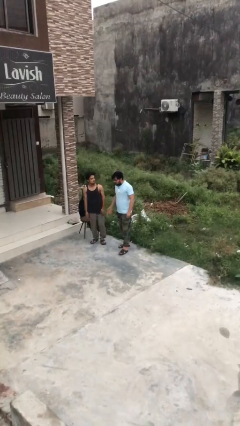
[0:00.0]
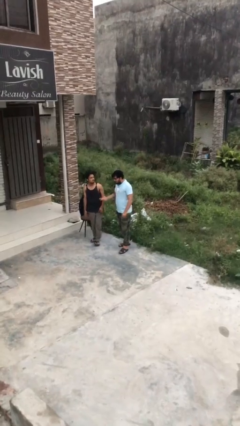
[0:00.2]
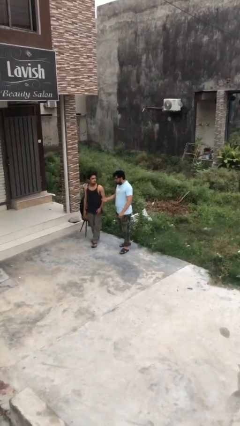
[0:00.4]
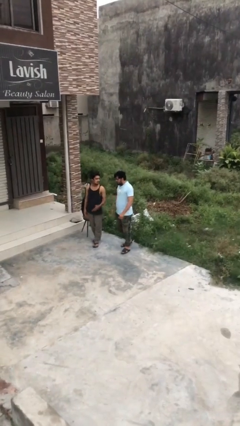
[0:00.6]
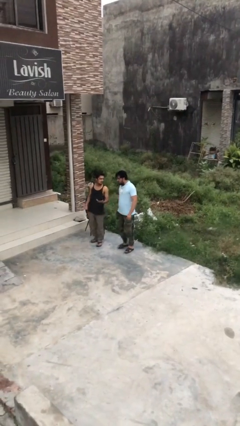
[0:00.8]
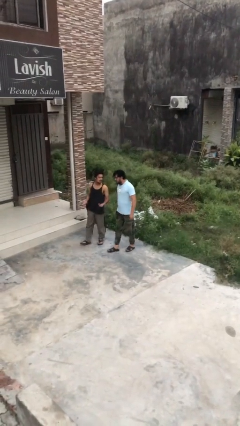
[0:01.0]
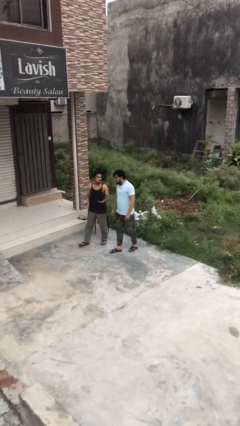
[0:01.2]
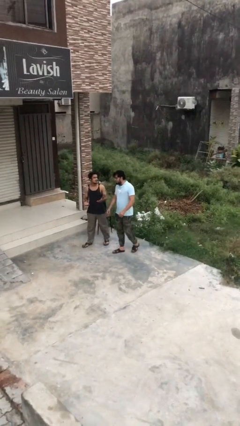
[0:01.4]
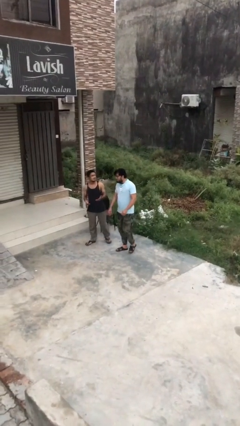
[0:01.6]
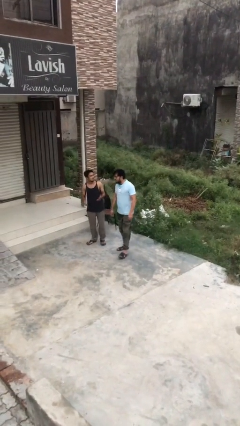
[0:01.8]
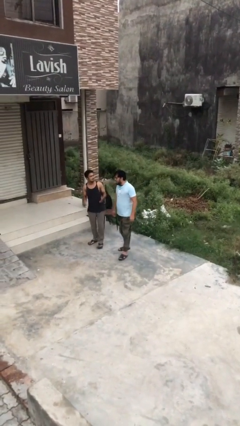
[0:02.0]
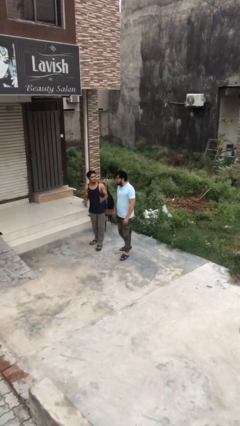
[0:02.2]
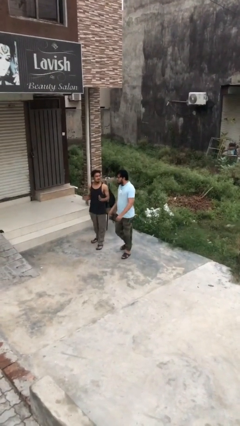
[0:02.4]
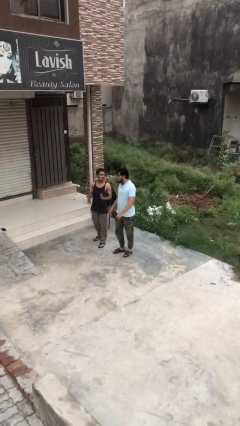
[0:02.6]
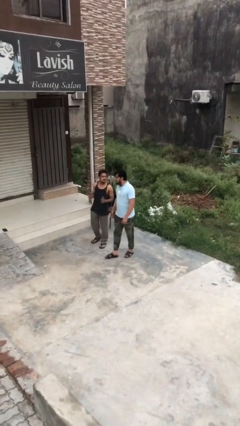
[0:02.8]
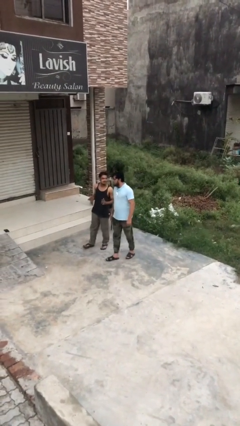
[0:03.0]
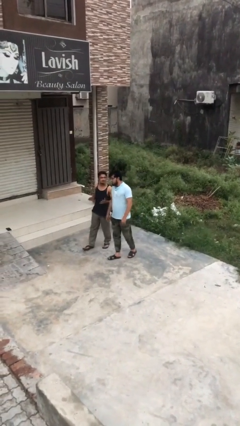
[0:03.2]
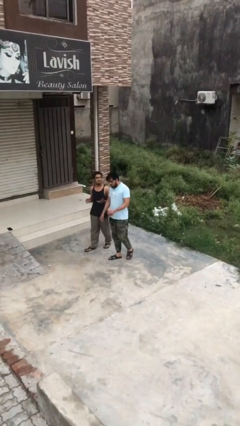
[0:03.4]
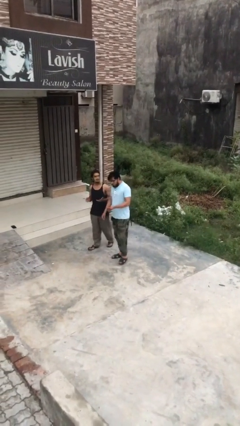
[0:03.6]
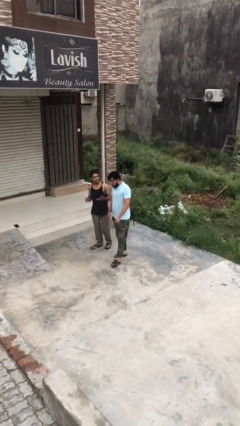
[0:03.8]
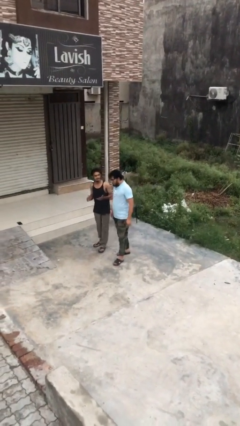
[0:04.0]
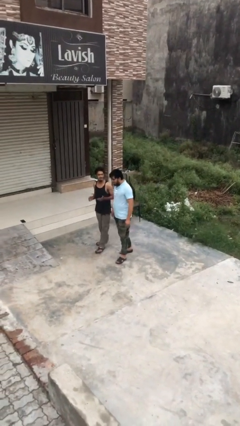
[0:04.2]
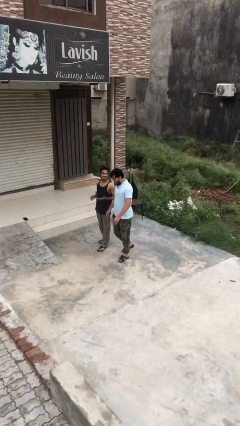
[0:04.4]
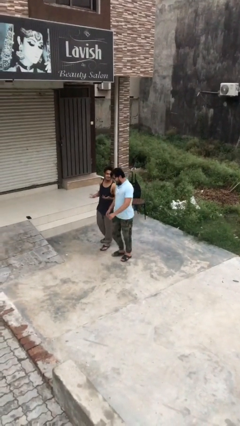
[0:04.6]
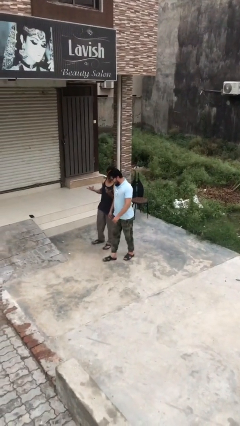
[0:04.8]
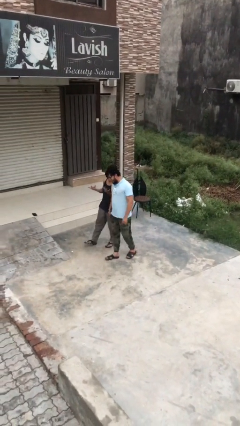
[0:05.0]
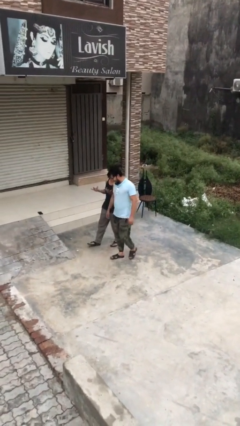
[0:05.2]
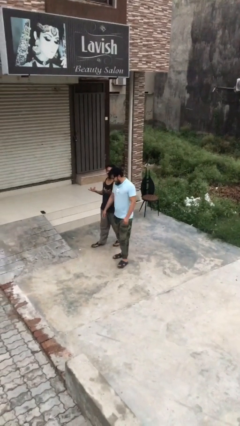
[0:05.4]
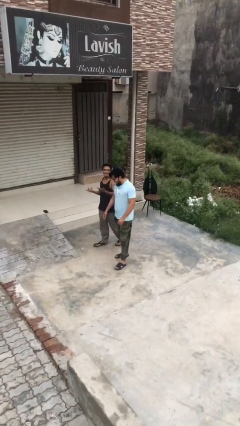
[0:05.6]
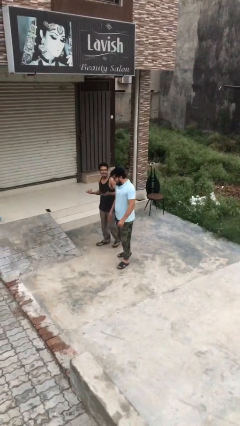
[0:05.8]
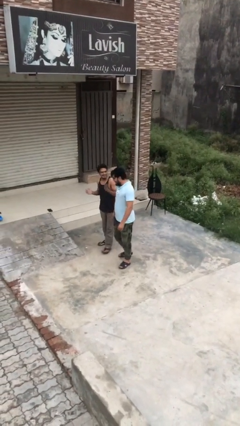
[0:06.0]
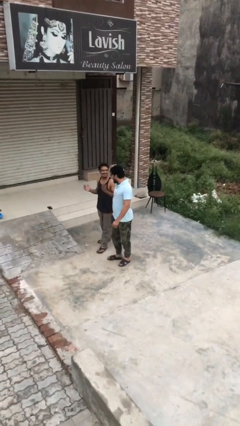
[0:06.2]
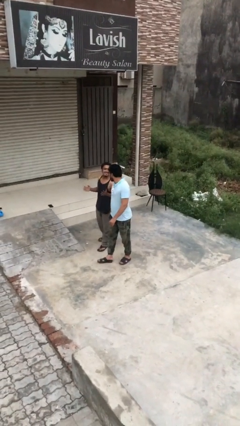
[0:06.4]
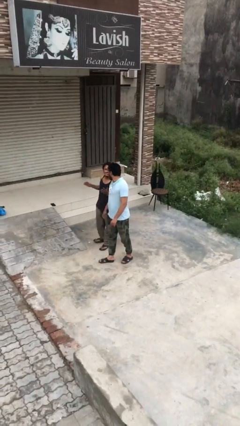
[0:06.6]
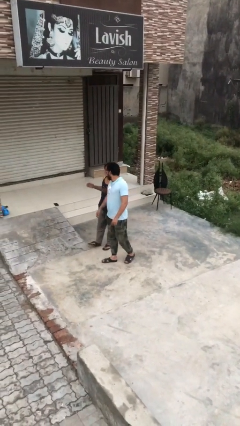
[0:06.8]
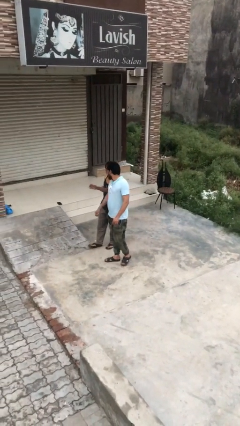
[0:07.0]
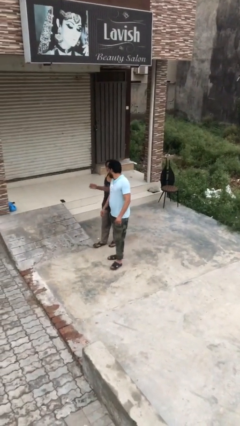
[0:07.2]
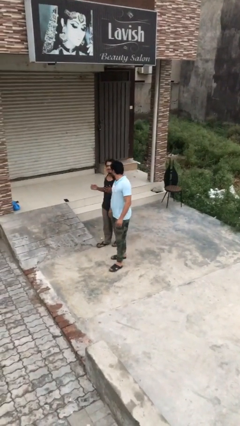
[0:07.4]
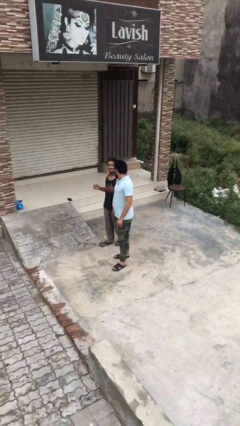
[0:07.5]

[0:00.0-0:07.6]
person talks to person

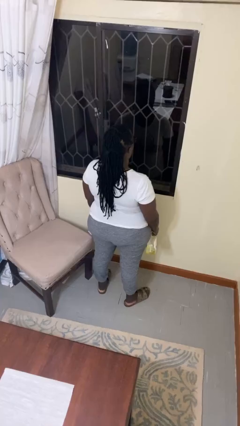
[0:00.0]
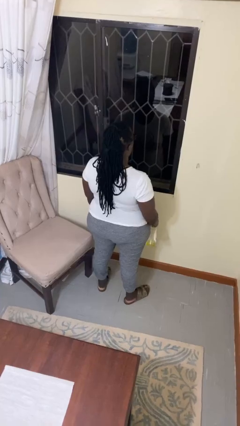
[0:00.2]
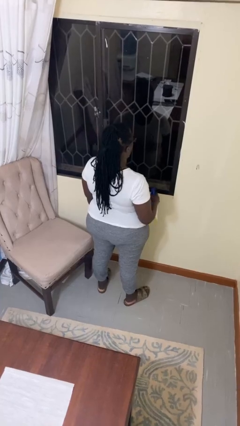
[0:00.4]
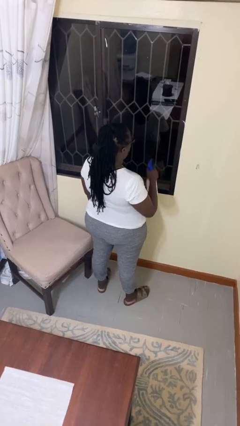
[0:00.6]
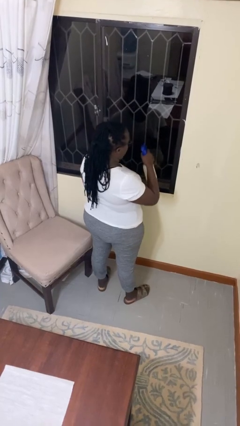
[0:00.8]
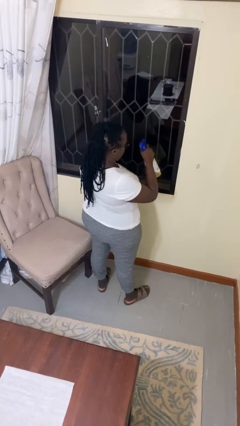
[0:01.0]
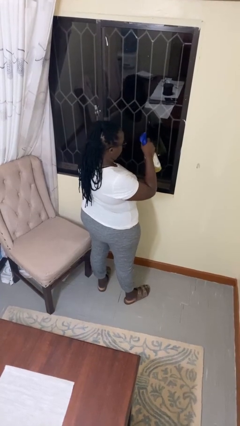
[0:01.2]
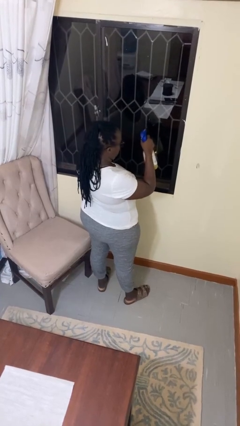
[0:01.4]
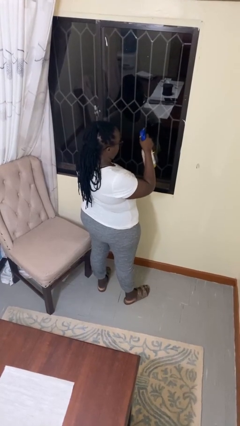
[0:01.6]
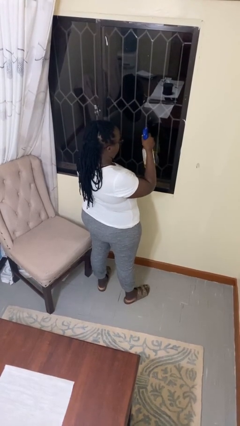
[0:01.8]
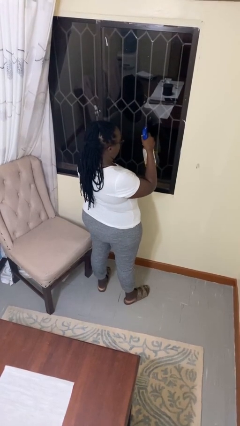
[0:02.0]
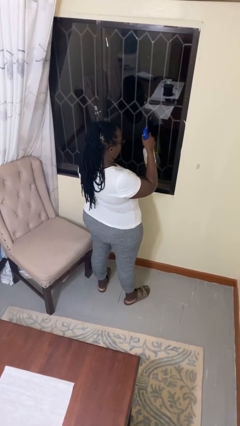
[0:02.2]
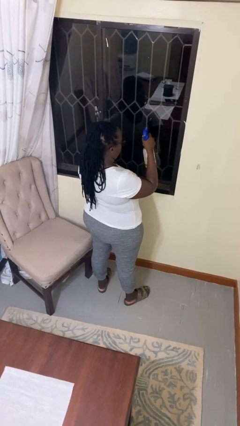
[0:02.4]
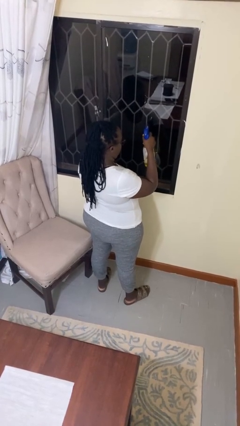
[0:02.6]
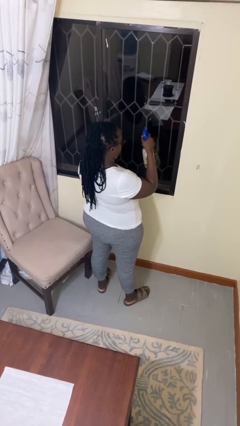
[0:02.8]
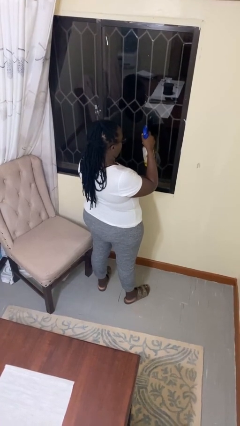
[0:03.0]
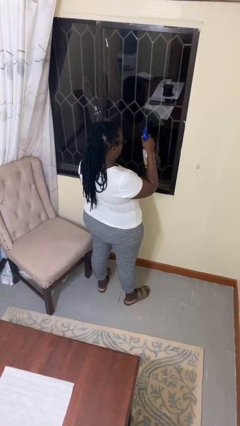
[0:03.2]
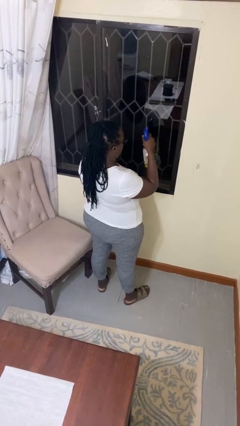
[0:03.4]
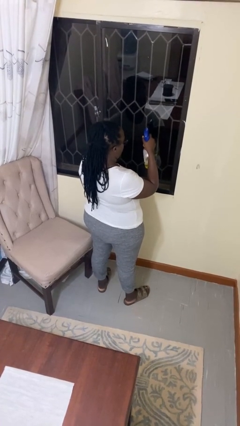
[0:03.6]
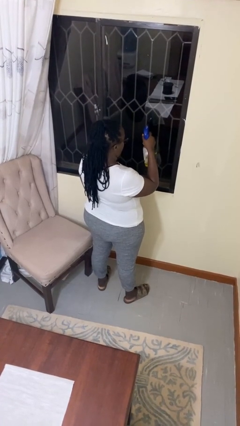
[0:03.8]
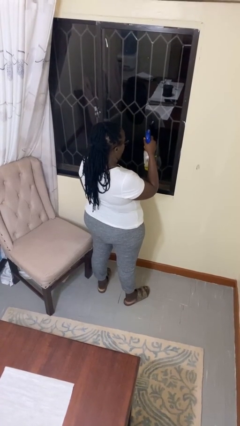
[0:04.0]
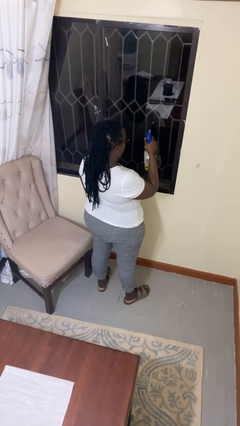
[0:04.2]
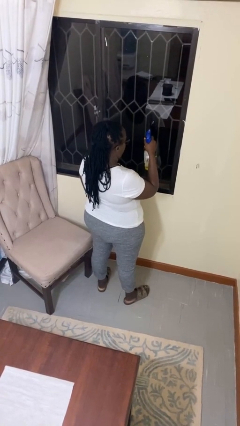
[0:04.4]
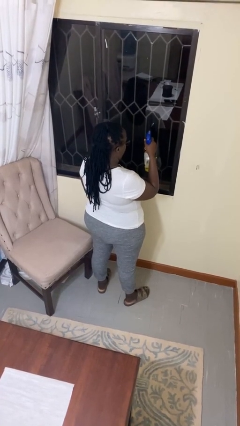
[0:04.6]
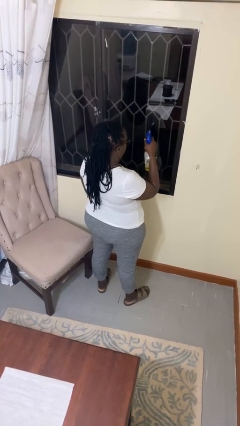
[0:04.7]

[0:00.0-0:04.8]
person sprays from bottle

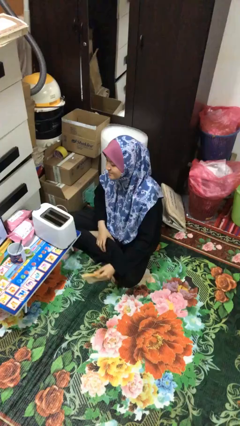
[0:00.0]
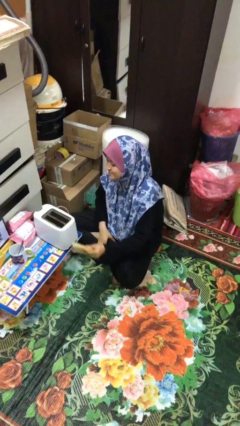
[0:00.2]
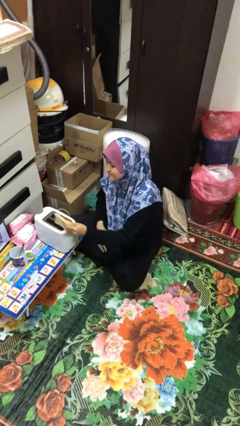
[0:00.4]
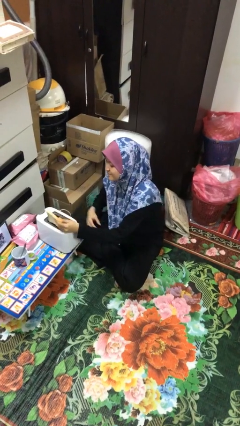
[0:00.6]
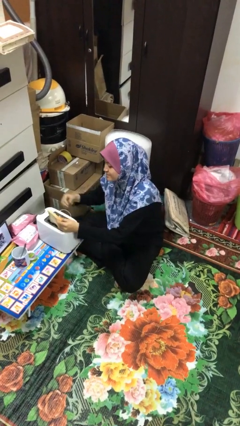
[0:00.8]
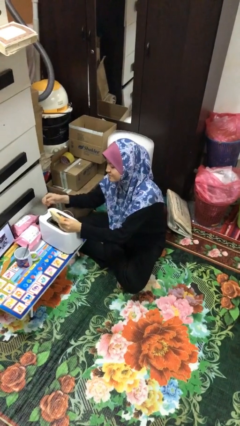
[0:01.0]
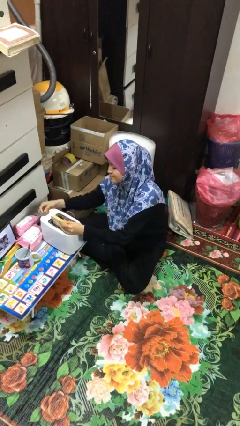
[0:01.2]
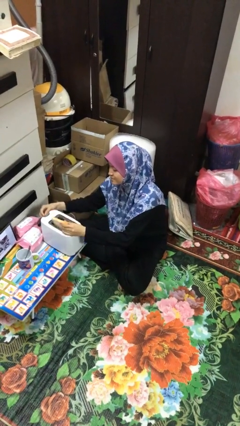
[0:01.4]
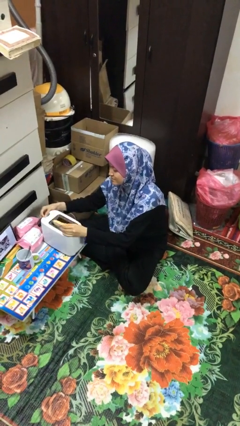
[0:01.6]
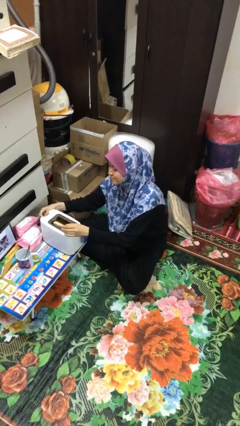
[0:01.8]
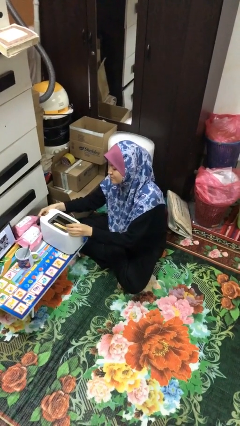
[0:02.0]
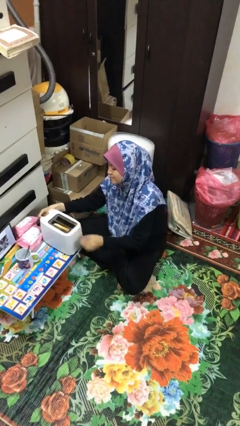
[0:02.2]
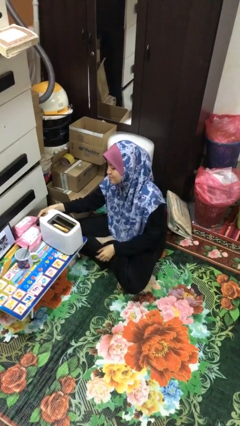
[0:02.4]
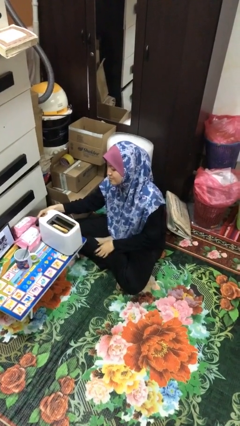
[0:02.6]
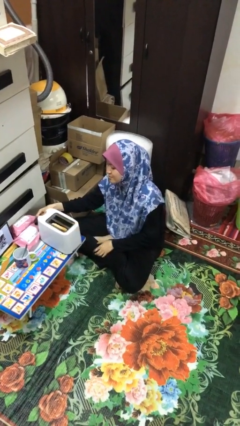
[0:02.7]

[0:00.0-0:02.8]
person puts object into toaster

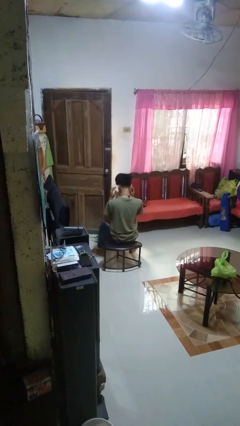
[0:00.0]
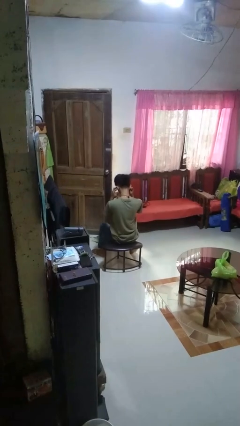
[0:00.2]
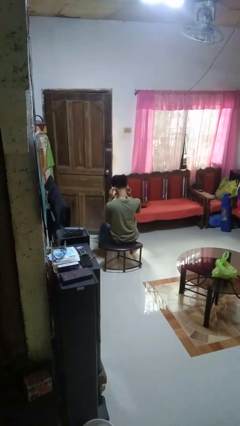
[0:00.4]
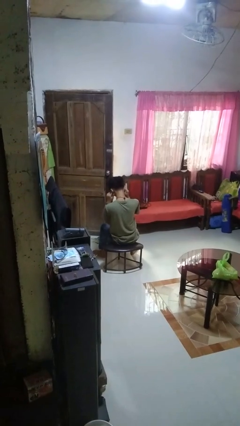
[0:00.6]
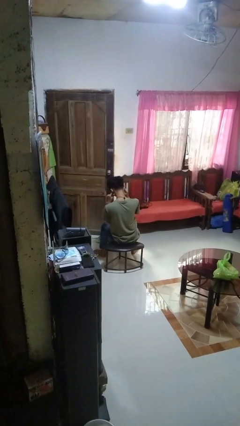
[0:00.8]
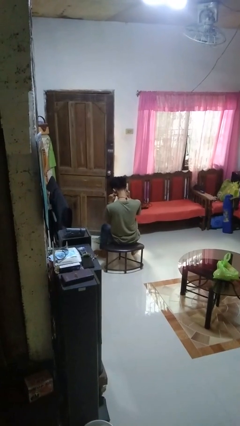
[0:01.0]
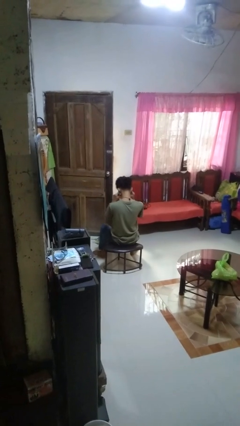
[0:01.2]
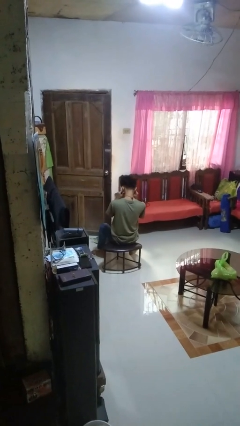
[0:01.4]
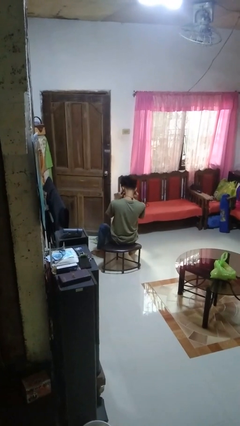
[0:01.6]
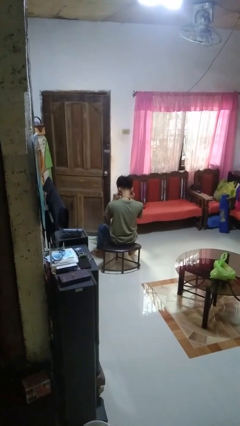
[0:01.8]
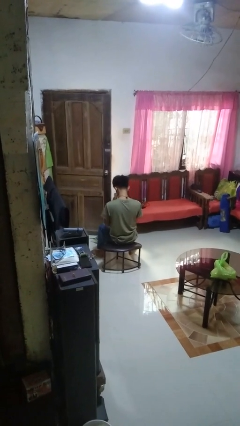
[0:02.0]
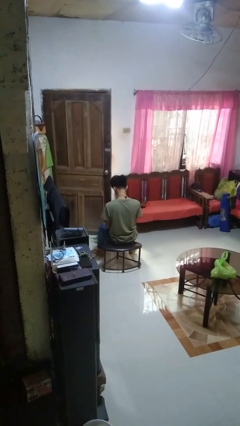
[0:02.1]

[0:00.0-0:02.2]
person puts fingers in ear

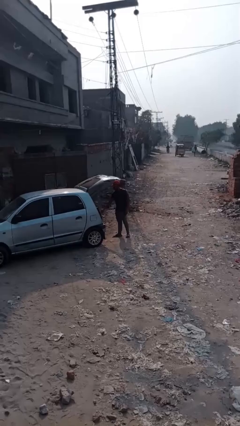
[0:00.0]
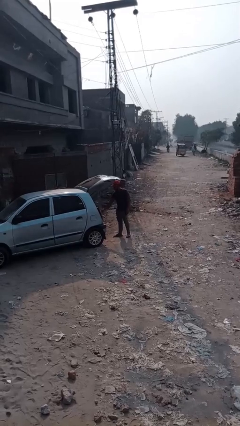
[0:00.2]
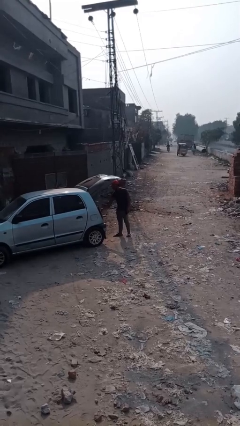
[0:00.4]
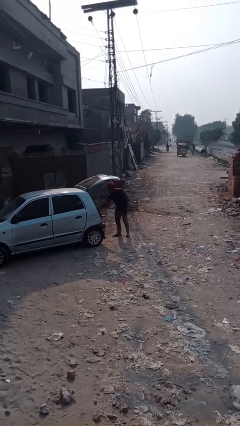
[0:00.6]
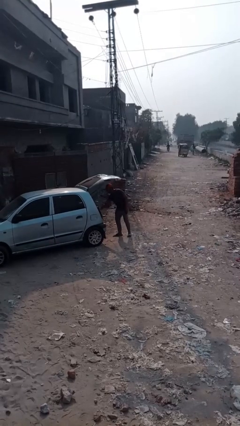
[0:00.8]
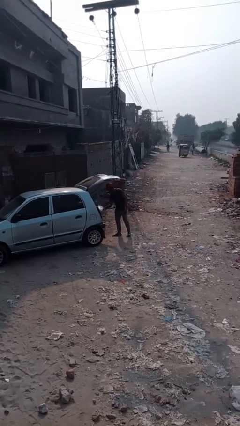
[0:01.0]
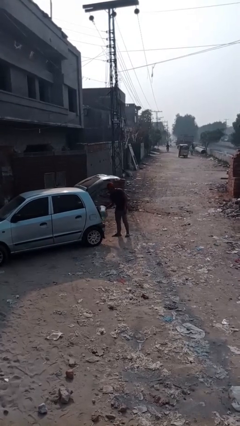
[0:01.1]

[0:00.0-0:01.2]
person unloads car
